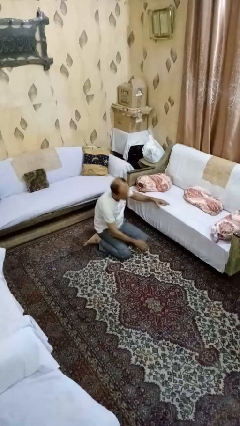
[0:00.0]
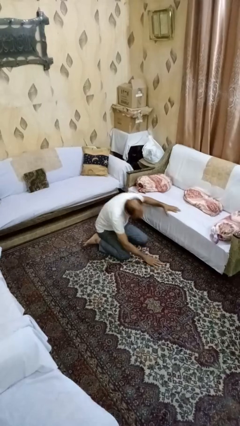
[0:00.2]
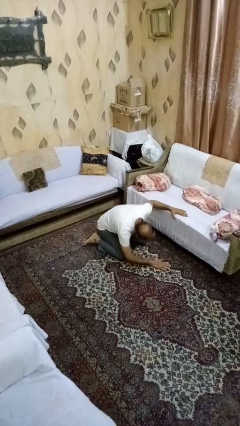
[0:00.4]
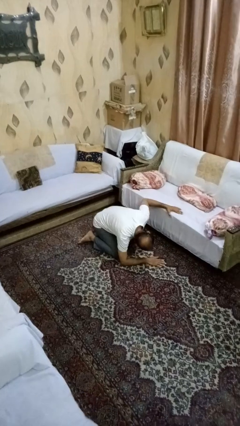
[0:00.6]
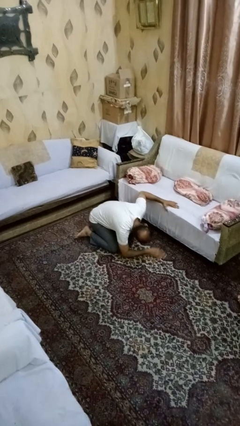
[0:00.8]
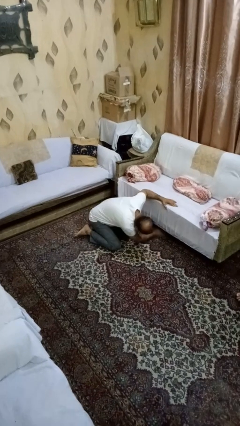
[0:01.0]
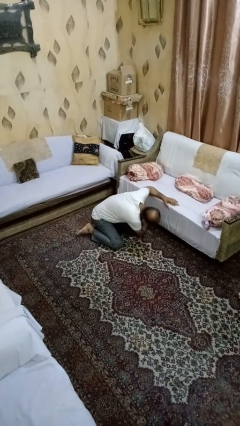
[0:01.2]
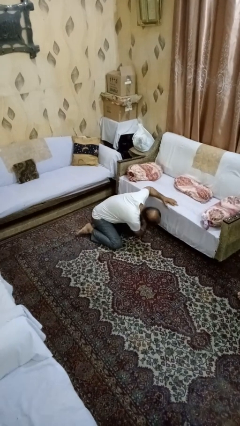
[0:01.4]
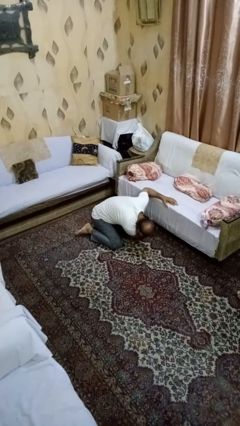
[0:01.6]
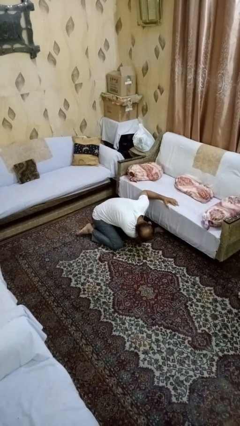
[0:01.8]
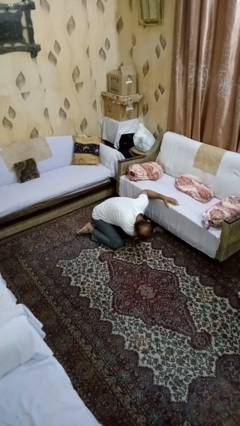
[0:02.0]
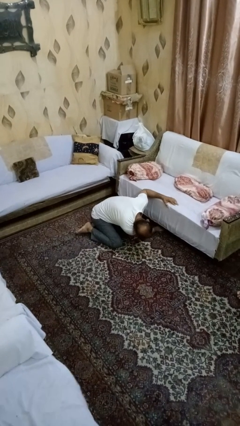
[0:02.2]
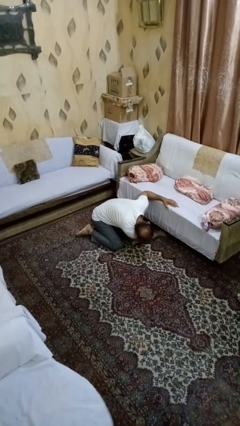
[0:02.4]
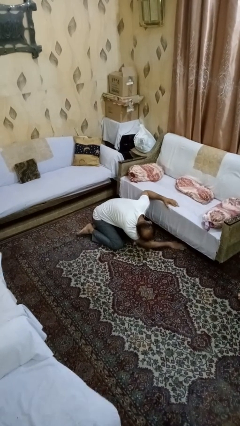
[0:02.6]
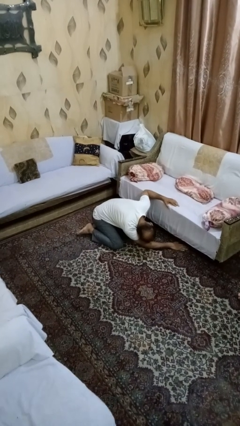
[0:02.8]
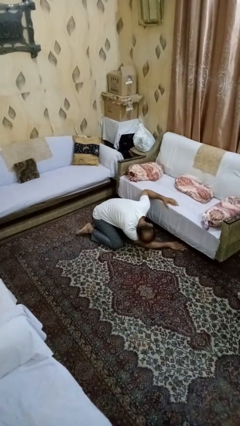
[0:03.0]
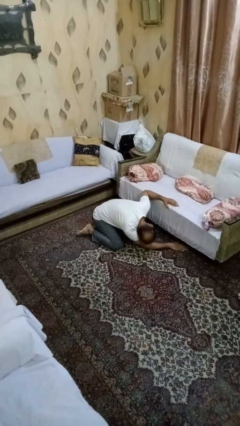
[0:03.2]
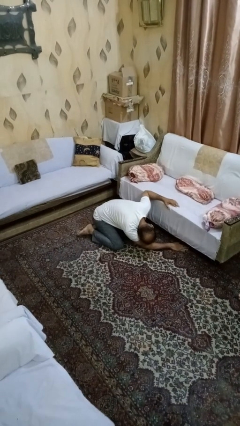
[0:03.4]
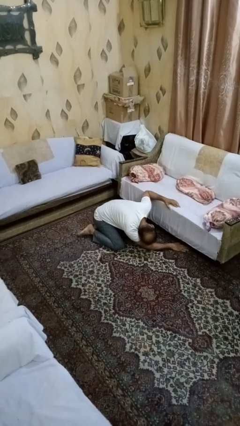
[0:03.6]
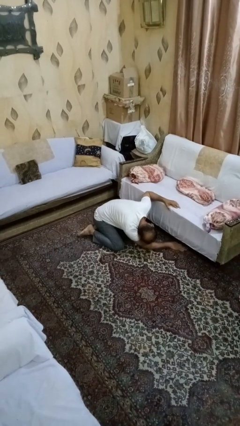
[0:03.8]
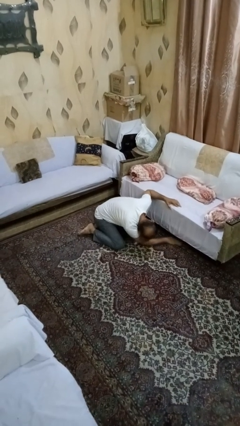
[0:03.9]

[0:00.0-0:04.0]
person searches under couch

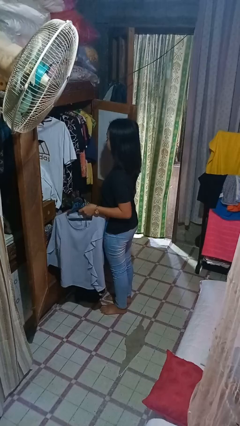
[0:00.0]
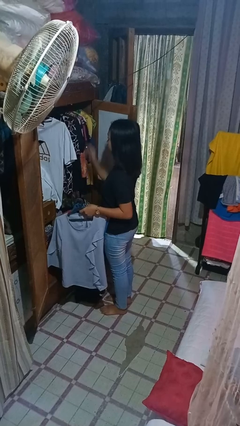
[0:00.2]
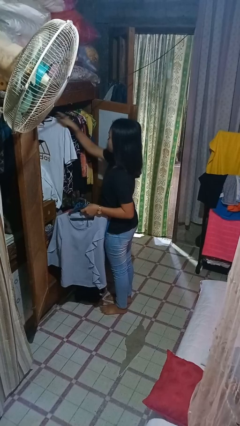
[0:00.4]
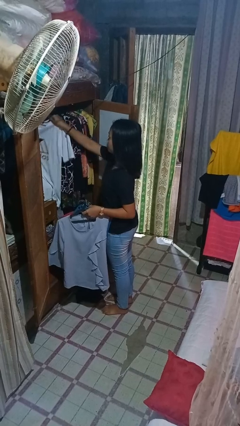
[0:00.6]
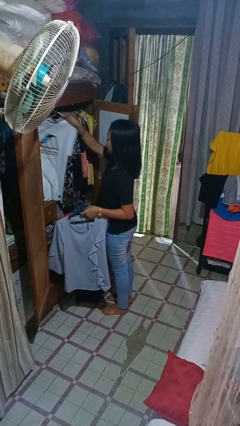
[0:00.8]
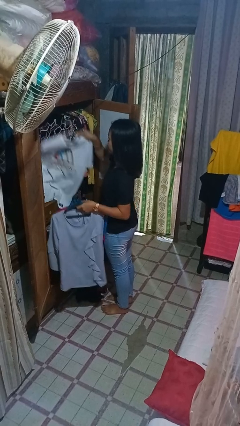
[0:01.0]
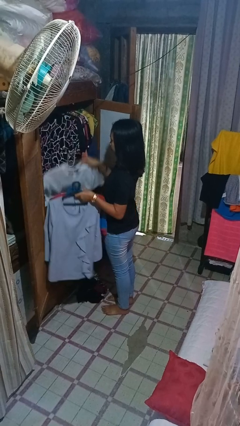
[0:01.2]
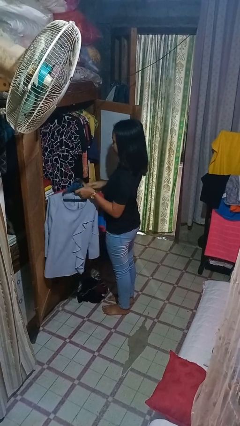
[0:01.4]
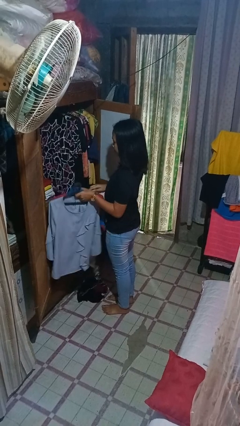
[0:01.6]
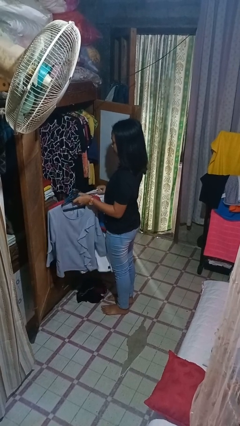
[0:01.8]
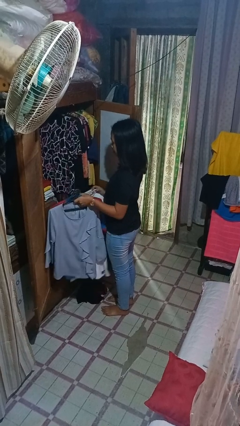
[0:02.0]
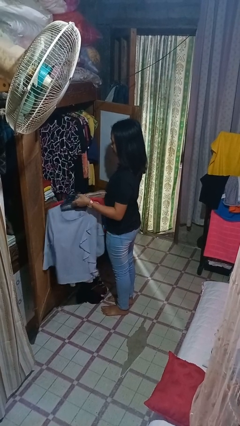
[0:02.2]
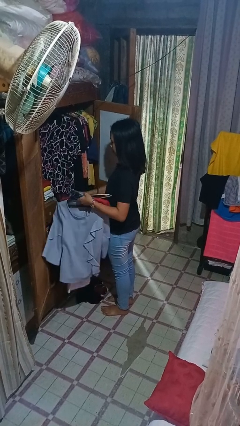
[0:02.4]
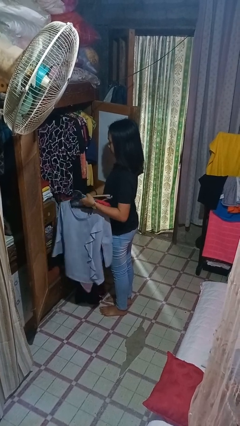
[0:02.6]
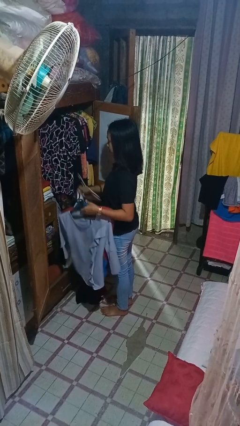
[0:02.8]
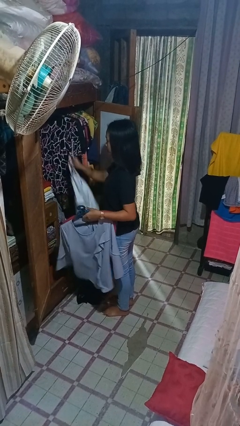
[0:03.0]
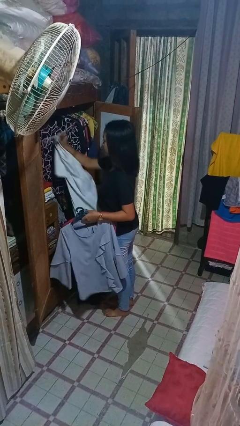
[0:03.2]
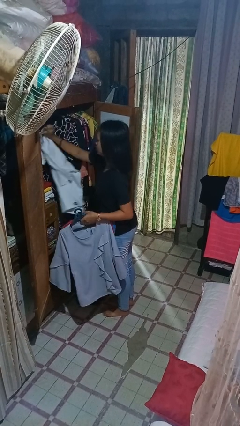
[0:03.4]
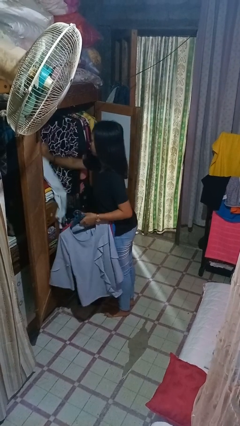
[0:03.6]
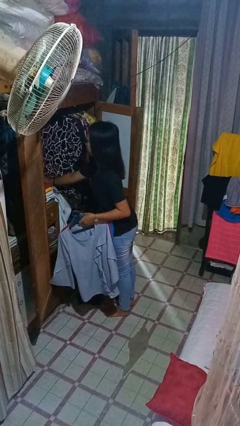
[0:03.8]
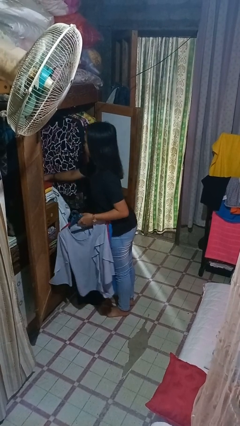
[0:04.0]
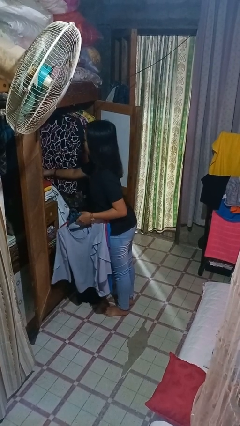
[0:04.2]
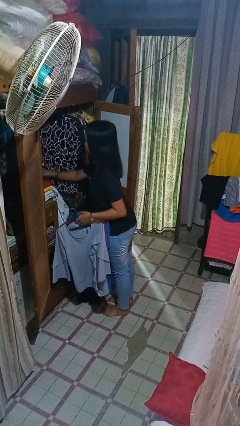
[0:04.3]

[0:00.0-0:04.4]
person takes clothes from closet

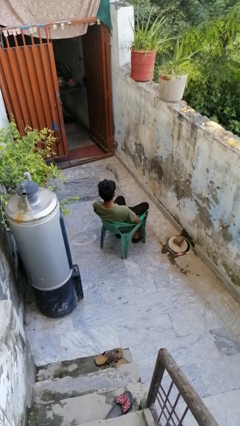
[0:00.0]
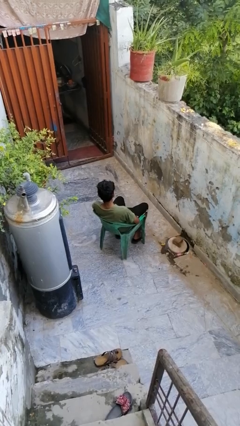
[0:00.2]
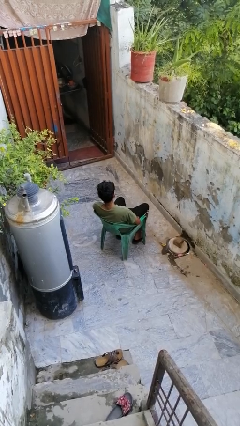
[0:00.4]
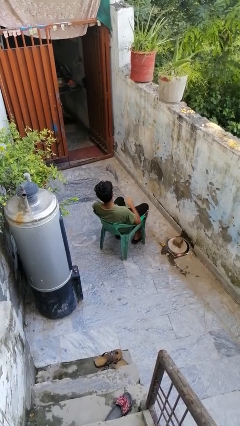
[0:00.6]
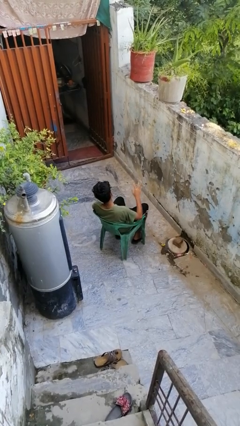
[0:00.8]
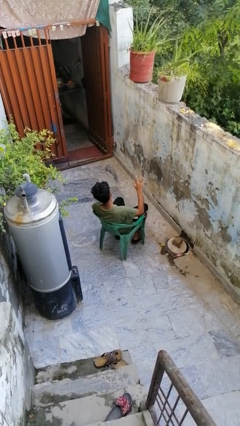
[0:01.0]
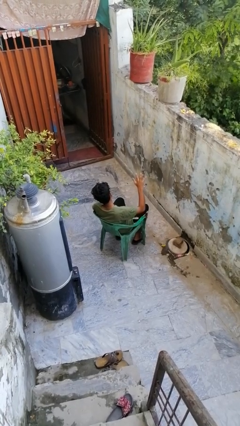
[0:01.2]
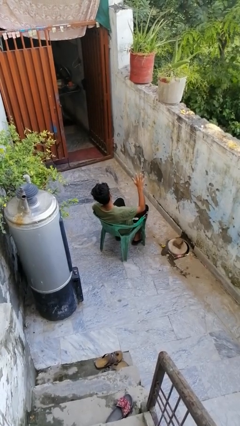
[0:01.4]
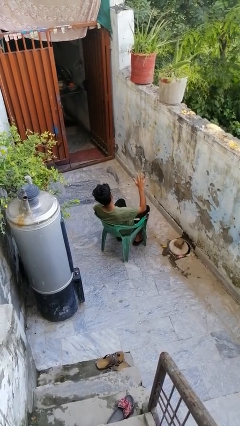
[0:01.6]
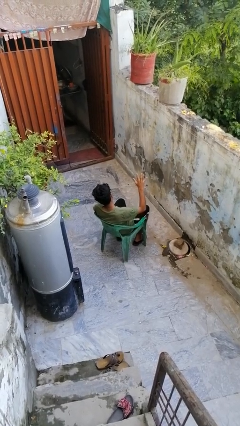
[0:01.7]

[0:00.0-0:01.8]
person gestures number five

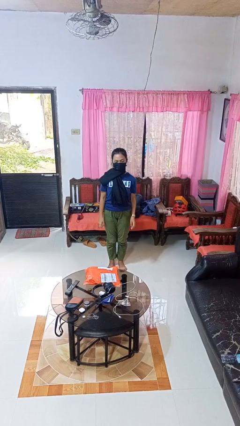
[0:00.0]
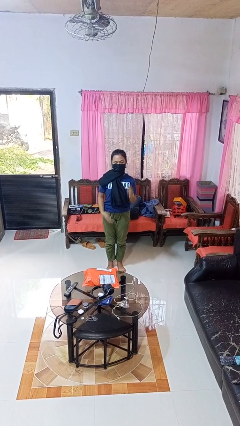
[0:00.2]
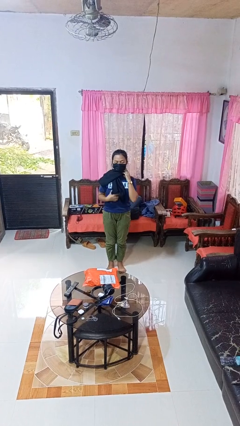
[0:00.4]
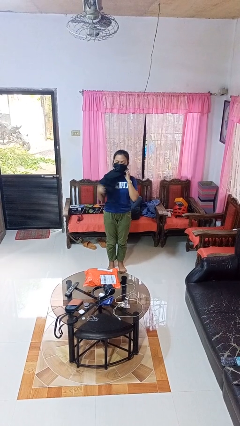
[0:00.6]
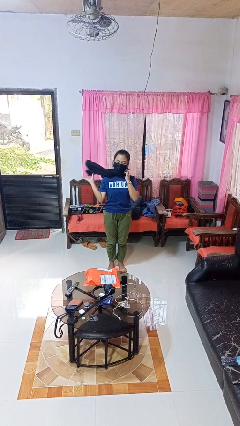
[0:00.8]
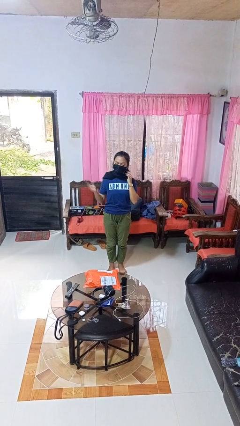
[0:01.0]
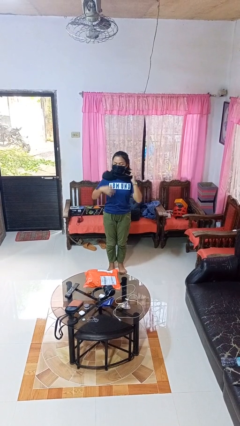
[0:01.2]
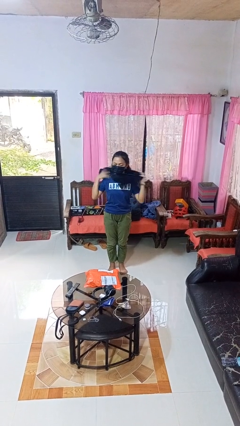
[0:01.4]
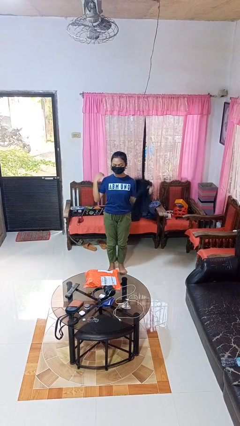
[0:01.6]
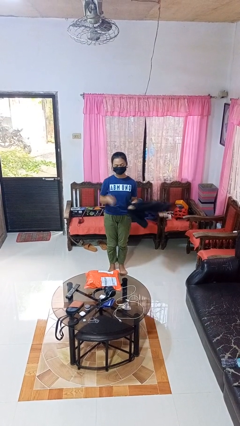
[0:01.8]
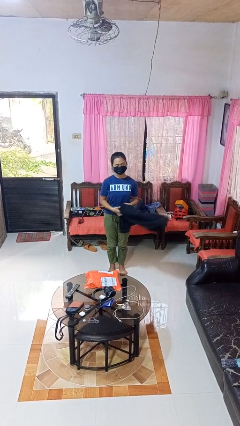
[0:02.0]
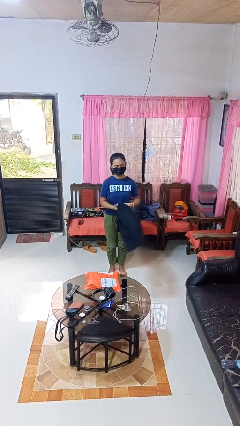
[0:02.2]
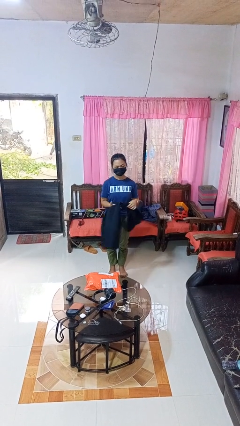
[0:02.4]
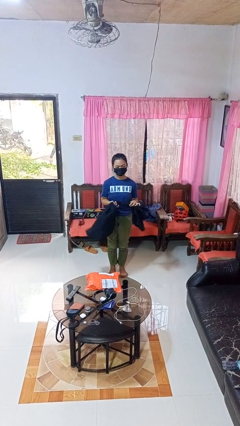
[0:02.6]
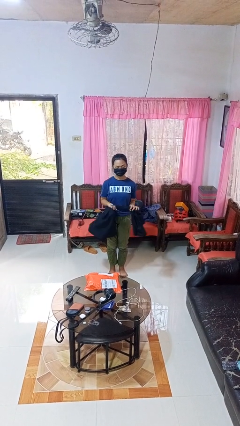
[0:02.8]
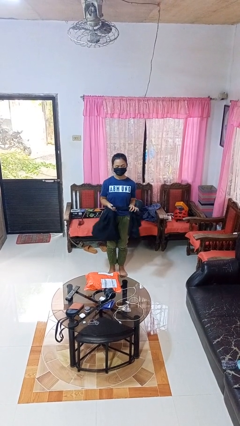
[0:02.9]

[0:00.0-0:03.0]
person takes off scarf

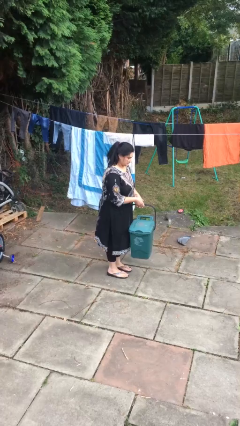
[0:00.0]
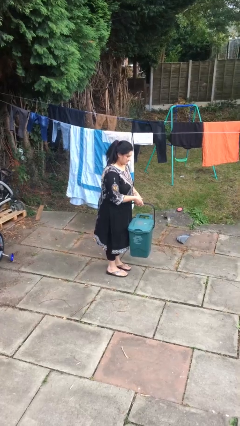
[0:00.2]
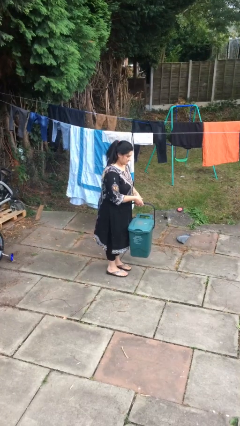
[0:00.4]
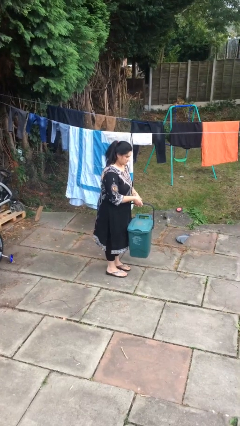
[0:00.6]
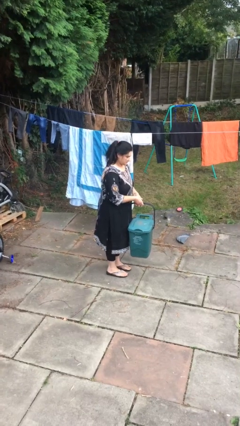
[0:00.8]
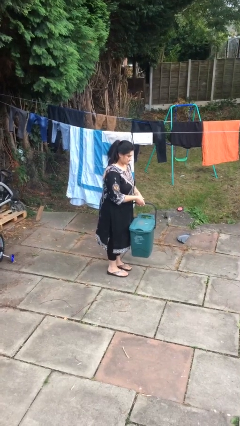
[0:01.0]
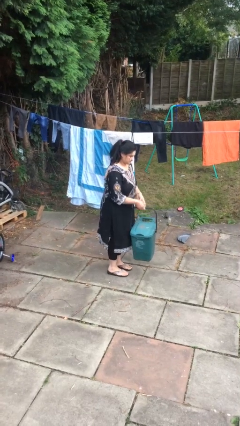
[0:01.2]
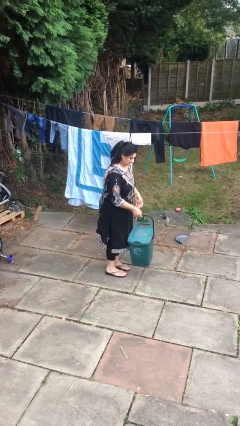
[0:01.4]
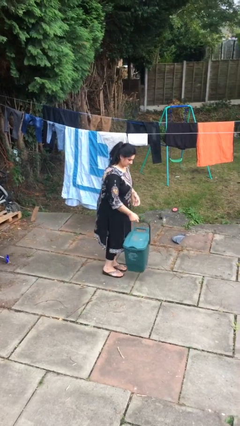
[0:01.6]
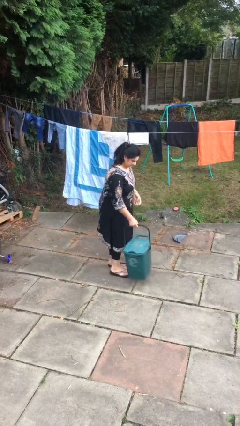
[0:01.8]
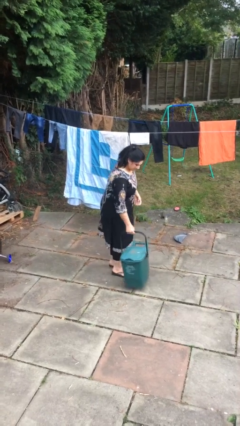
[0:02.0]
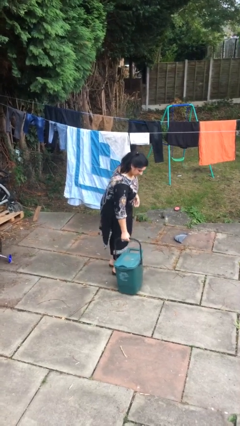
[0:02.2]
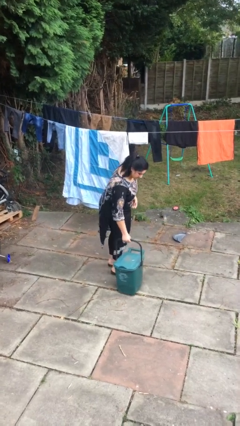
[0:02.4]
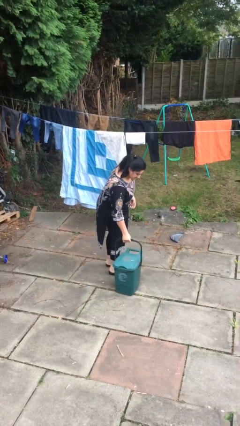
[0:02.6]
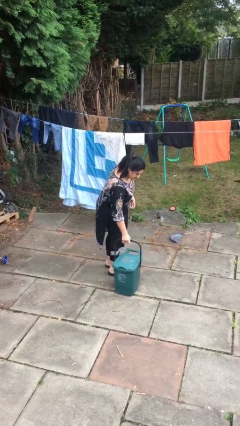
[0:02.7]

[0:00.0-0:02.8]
person puts down object on floor

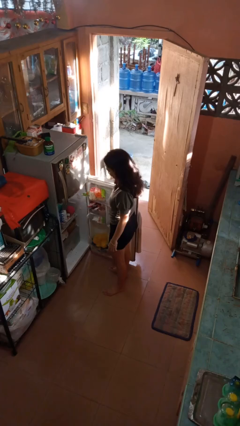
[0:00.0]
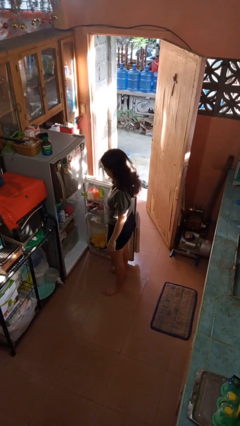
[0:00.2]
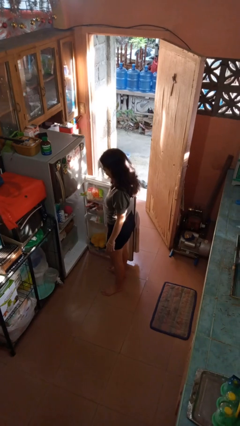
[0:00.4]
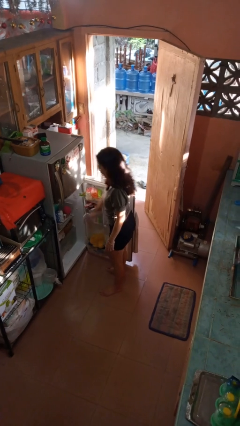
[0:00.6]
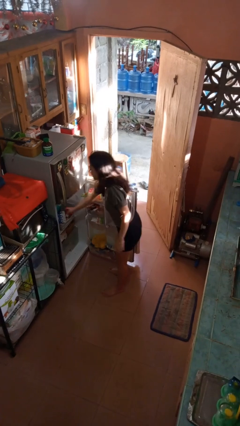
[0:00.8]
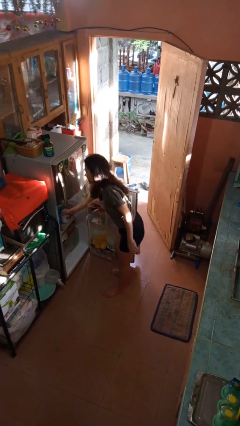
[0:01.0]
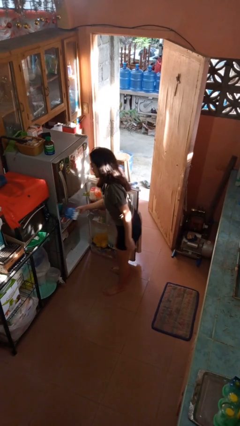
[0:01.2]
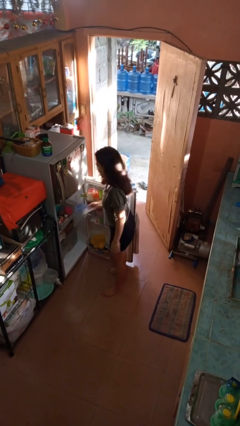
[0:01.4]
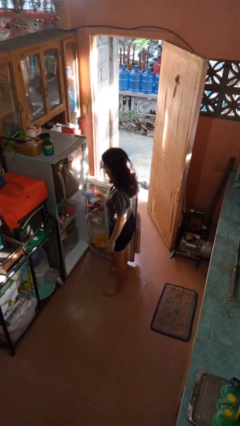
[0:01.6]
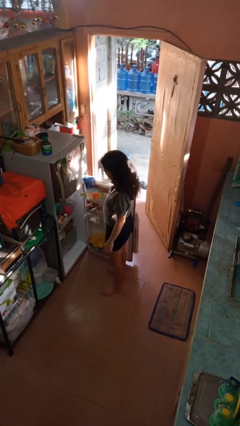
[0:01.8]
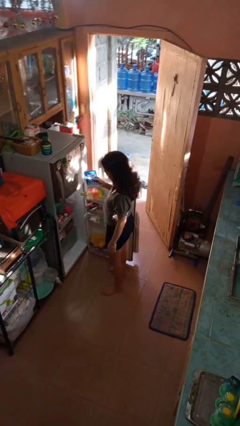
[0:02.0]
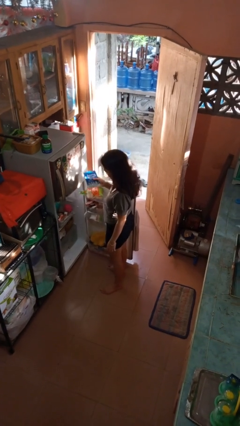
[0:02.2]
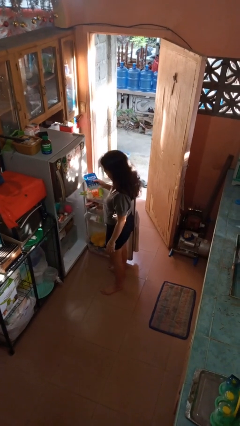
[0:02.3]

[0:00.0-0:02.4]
person takes object from refrigerator
